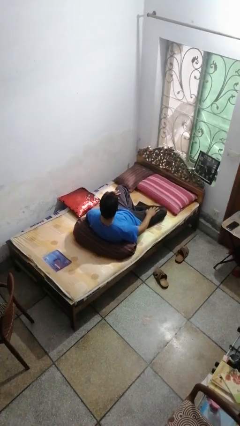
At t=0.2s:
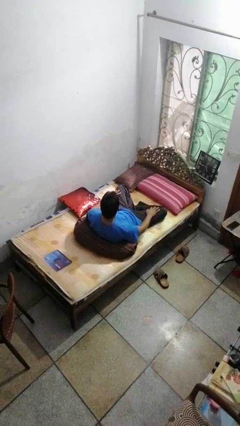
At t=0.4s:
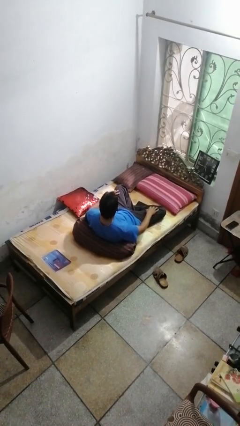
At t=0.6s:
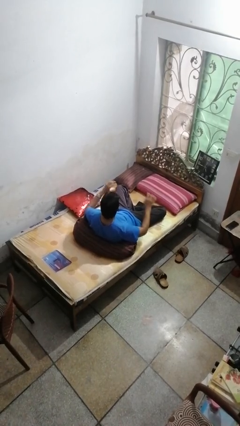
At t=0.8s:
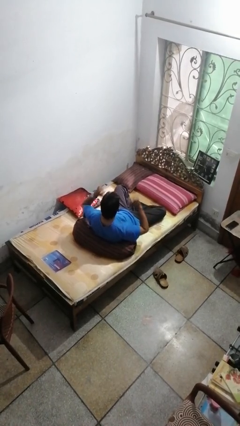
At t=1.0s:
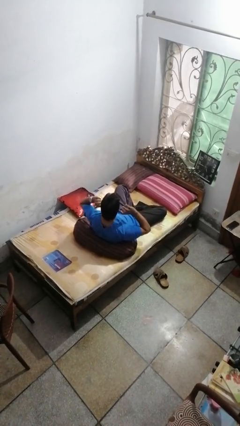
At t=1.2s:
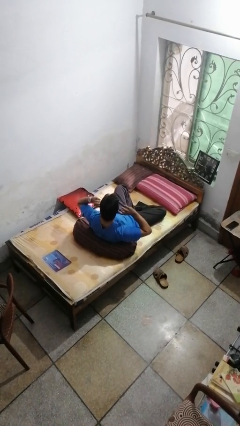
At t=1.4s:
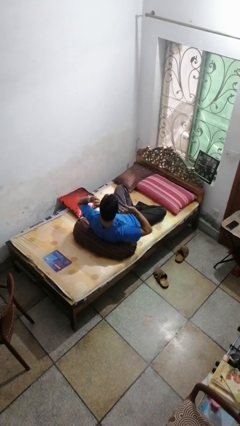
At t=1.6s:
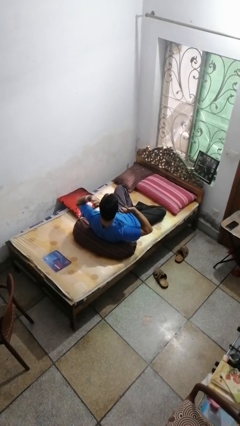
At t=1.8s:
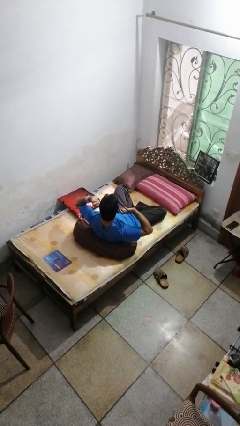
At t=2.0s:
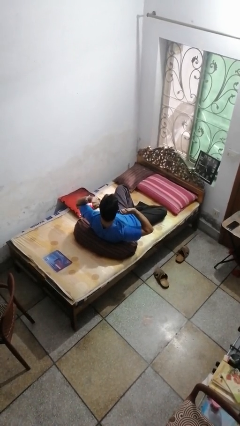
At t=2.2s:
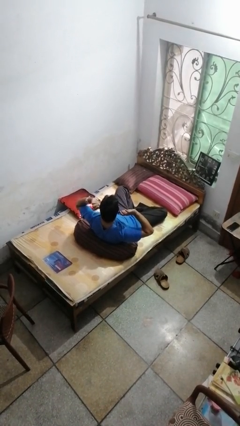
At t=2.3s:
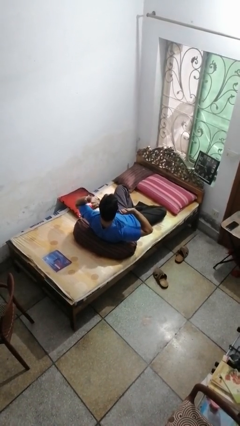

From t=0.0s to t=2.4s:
person puts fingers in ear

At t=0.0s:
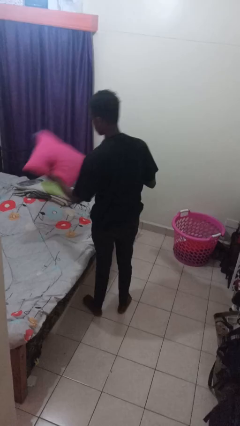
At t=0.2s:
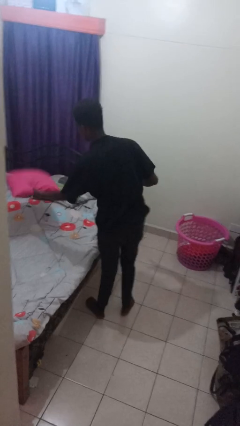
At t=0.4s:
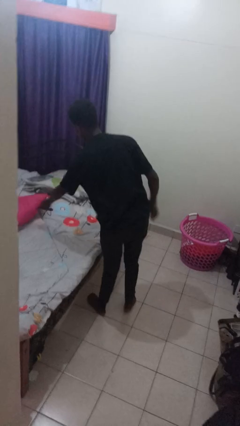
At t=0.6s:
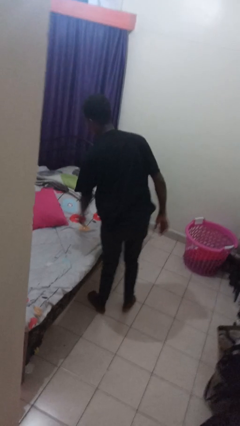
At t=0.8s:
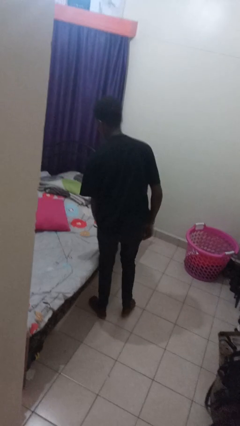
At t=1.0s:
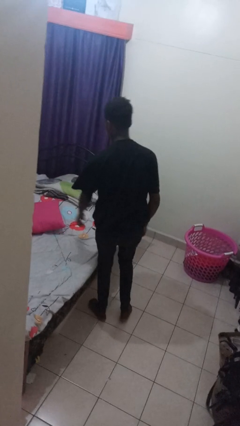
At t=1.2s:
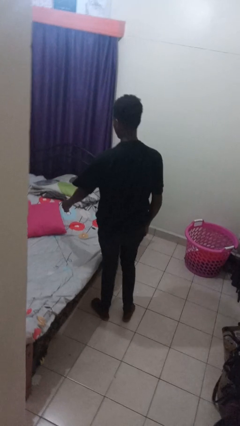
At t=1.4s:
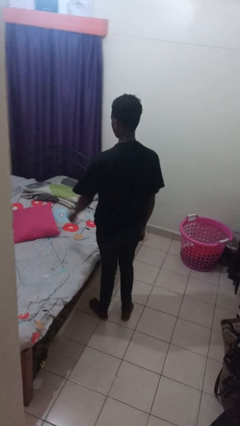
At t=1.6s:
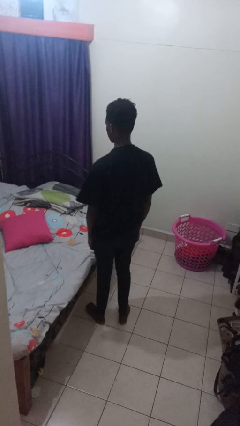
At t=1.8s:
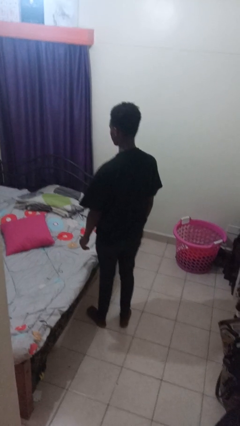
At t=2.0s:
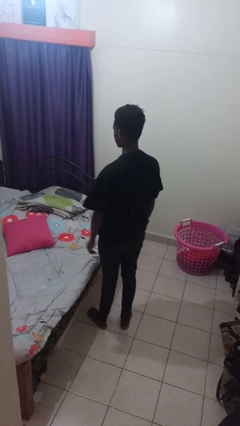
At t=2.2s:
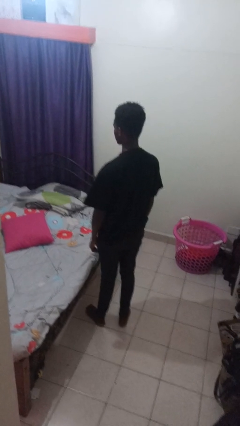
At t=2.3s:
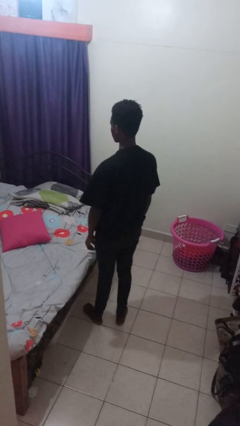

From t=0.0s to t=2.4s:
person puts down object on bed

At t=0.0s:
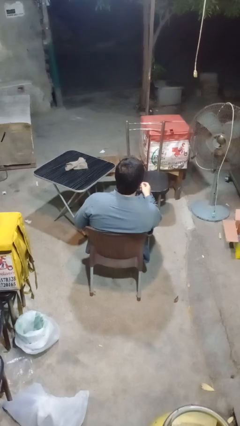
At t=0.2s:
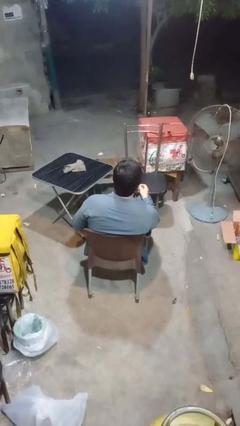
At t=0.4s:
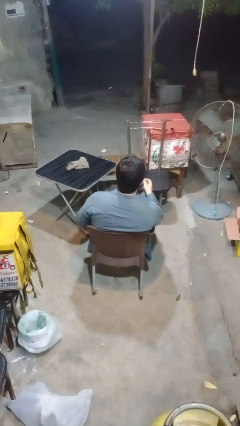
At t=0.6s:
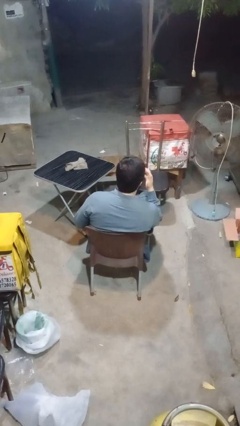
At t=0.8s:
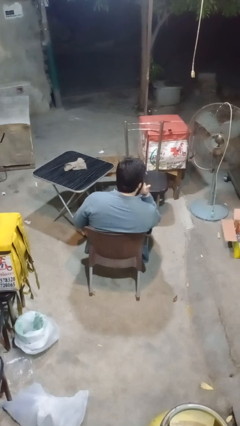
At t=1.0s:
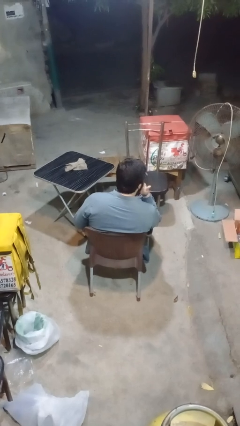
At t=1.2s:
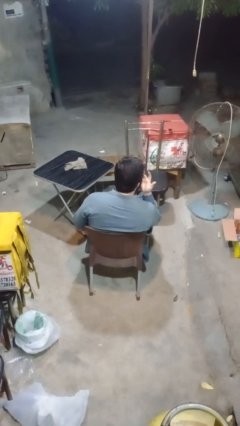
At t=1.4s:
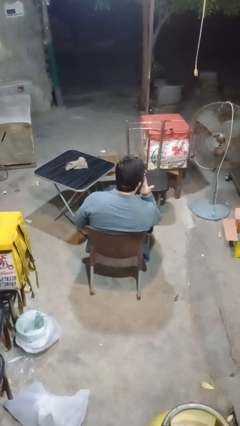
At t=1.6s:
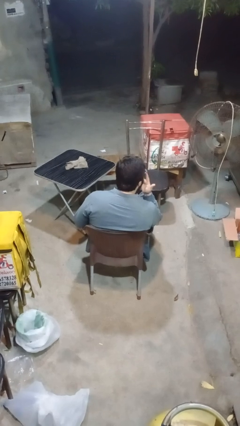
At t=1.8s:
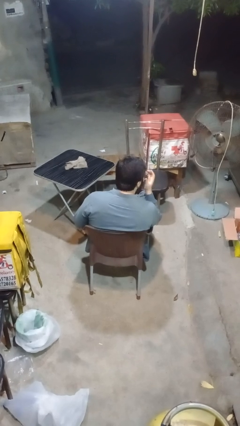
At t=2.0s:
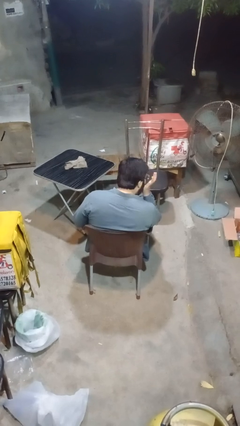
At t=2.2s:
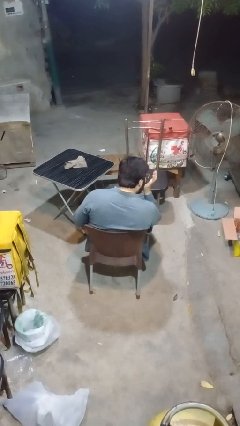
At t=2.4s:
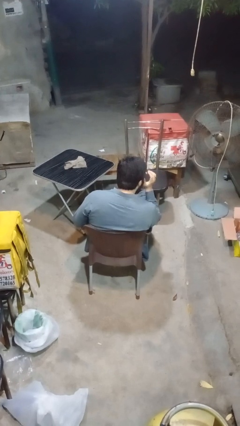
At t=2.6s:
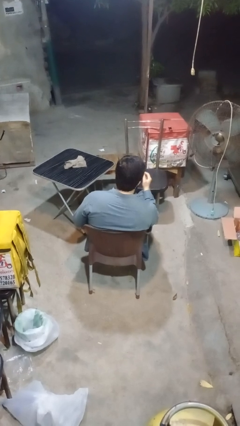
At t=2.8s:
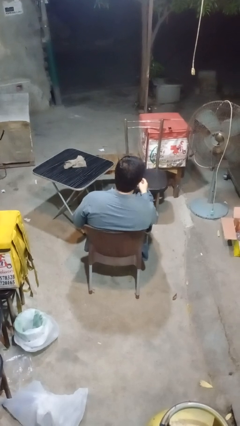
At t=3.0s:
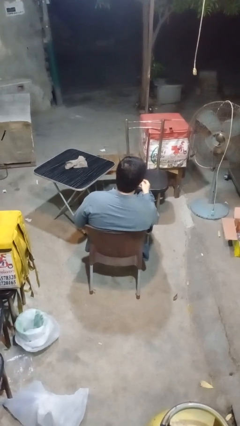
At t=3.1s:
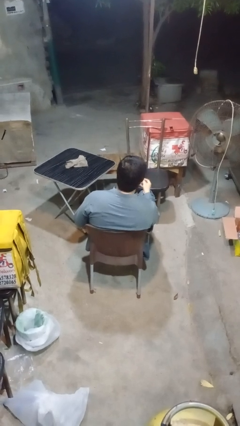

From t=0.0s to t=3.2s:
person licks fingers

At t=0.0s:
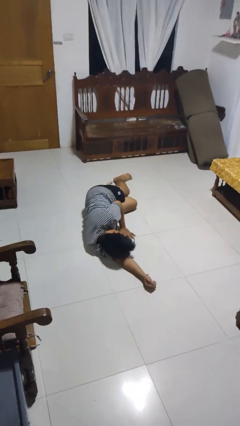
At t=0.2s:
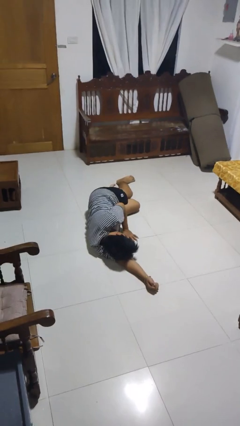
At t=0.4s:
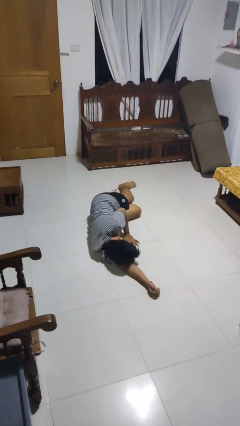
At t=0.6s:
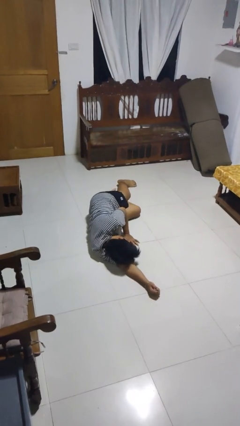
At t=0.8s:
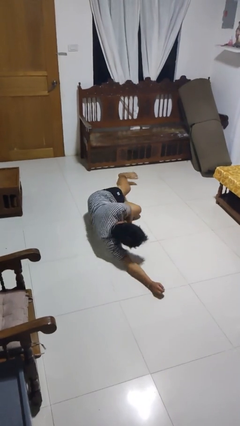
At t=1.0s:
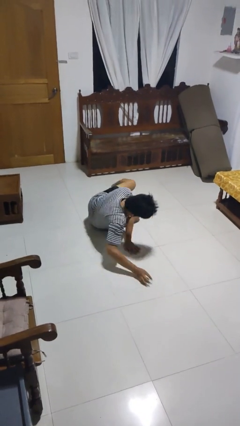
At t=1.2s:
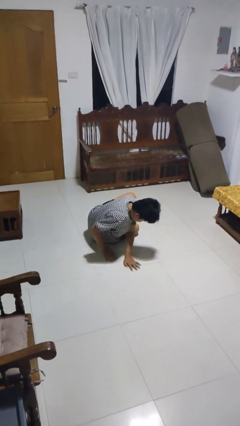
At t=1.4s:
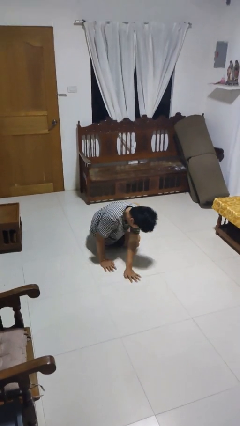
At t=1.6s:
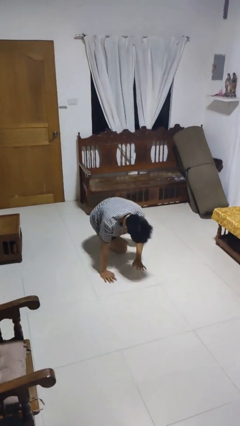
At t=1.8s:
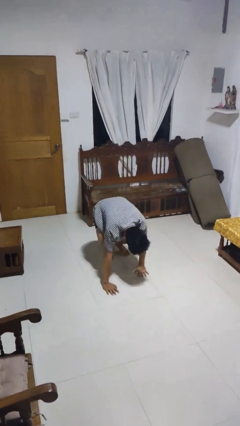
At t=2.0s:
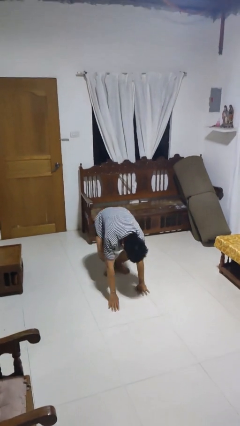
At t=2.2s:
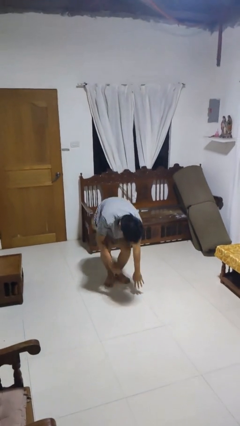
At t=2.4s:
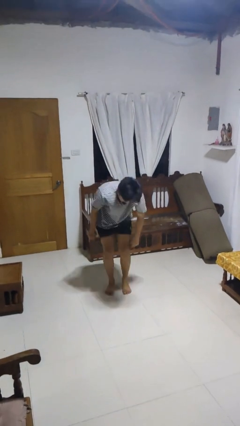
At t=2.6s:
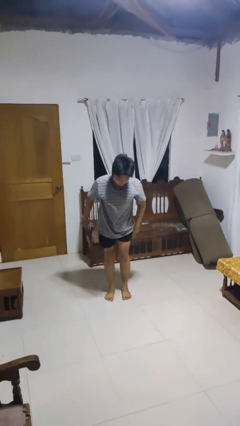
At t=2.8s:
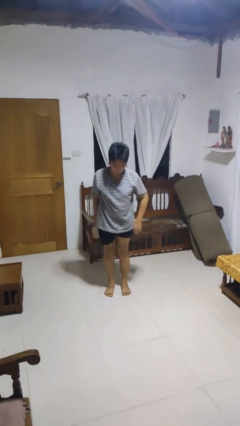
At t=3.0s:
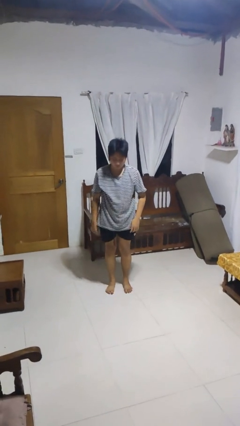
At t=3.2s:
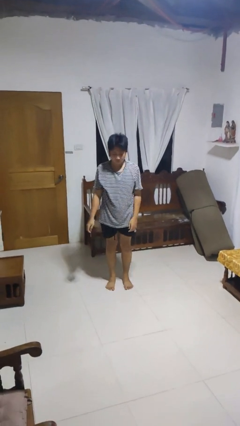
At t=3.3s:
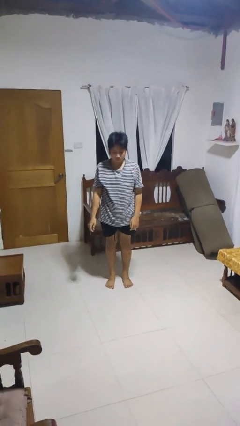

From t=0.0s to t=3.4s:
person stands up from floor

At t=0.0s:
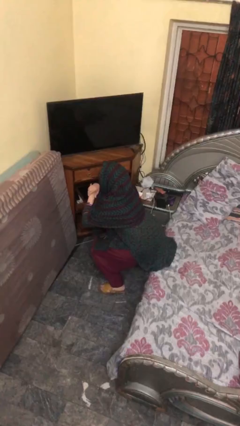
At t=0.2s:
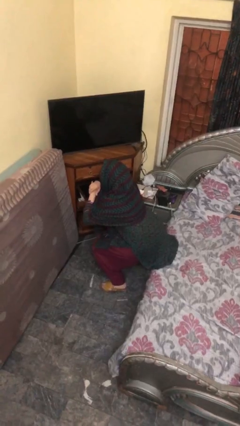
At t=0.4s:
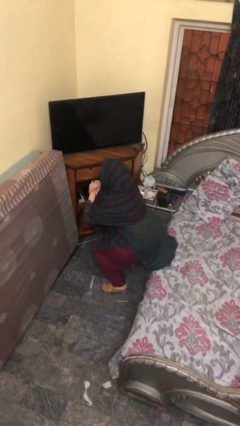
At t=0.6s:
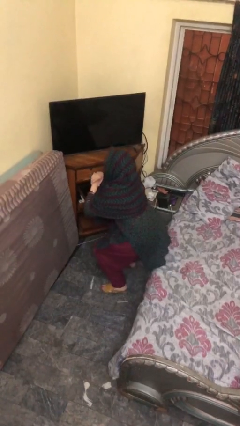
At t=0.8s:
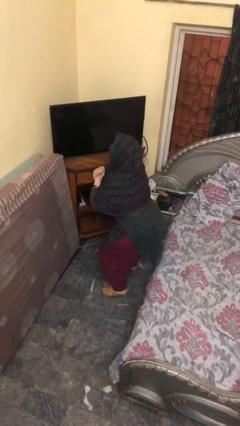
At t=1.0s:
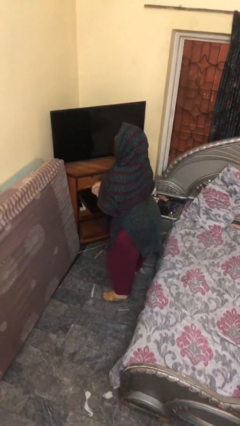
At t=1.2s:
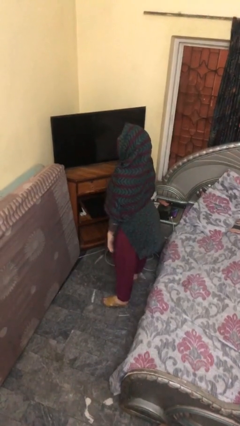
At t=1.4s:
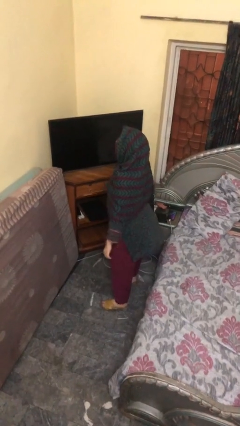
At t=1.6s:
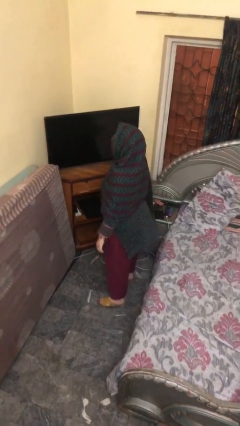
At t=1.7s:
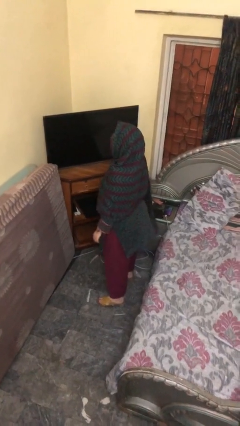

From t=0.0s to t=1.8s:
person stands up

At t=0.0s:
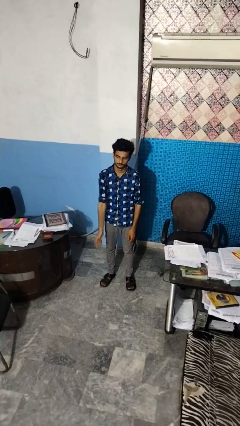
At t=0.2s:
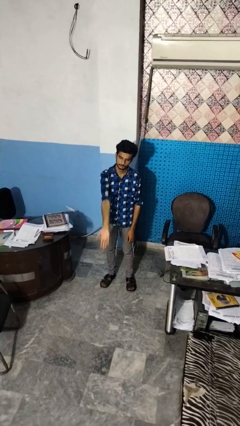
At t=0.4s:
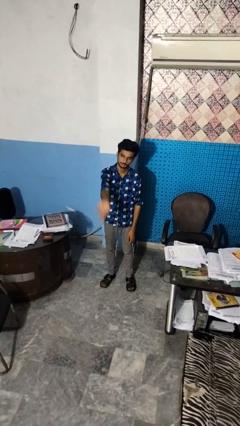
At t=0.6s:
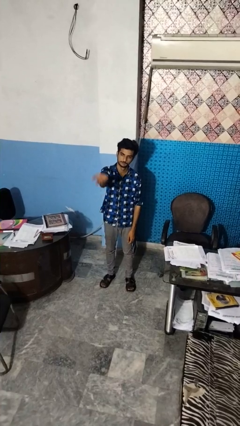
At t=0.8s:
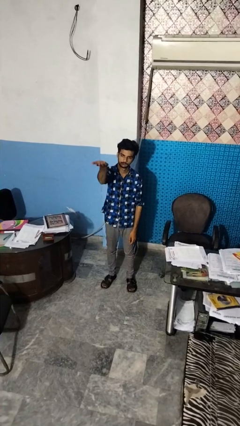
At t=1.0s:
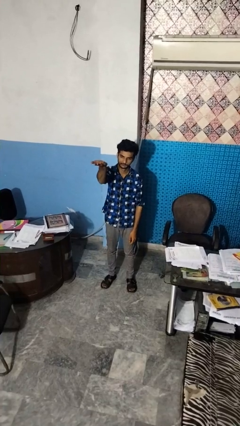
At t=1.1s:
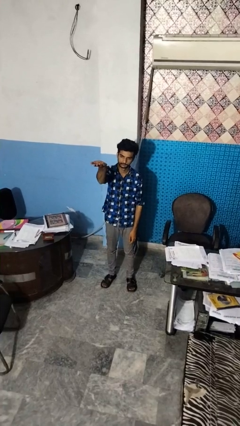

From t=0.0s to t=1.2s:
person gestures swipe up

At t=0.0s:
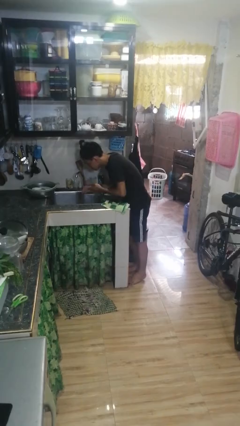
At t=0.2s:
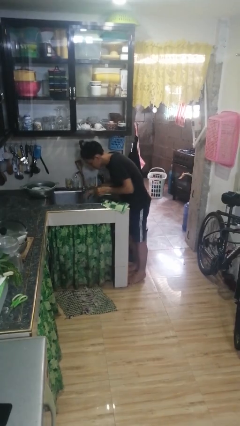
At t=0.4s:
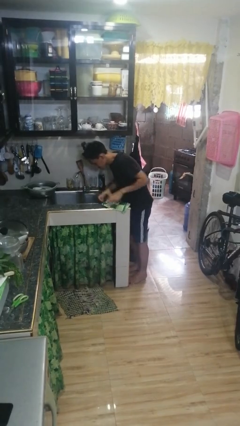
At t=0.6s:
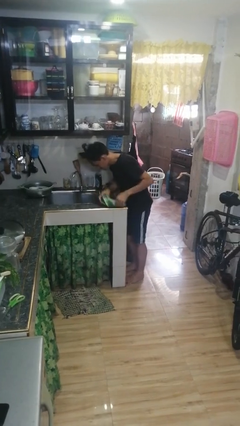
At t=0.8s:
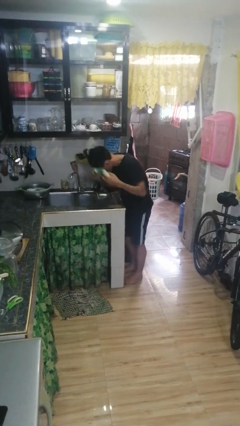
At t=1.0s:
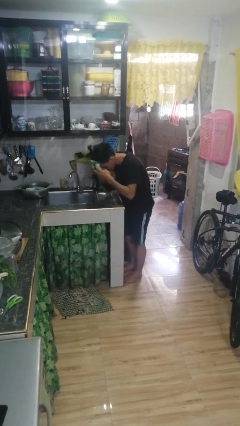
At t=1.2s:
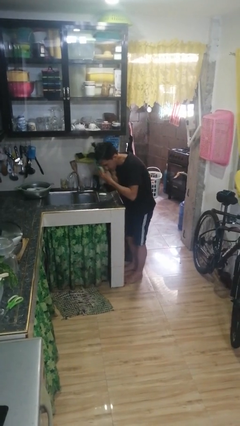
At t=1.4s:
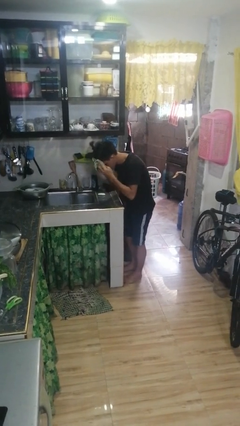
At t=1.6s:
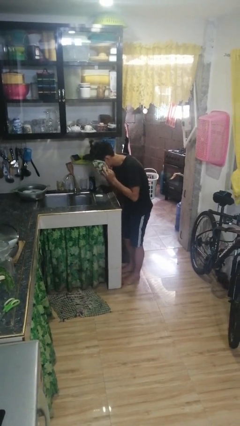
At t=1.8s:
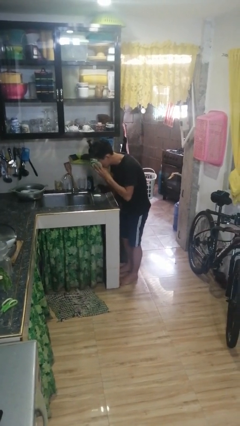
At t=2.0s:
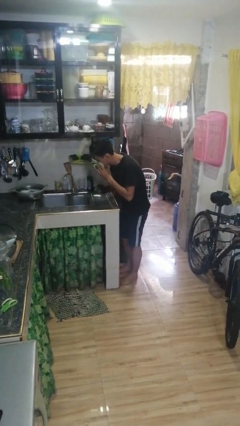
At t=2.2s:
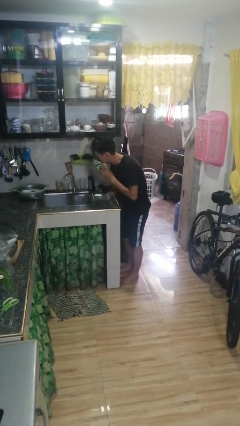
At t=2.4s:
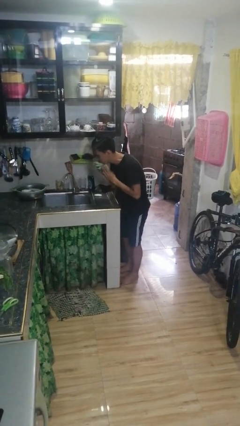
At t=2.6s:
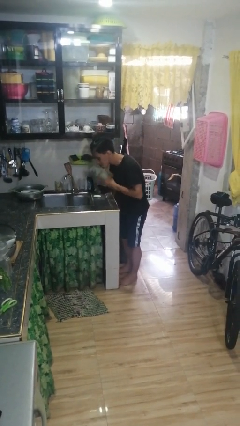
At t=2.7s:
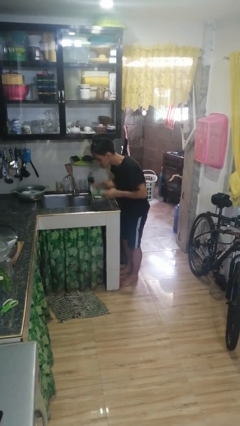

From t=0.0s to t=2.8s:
person dries face with towel
